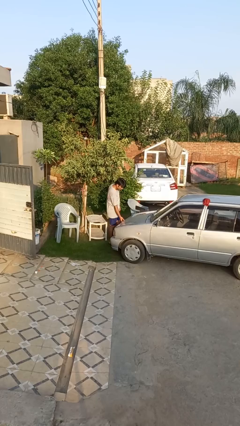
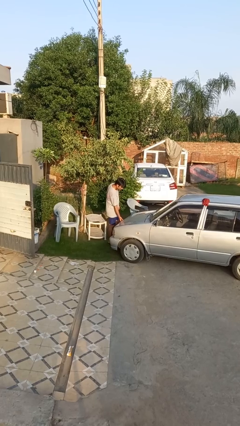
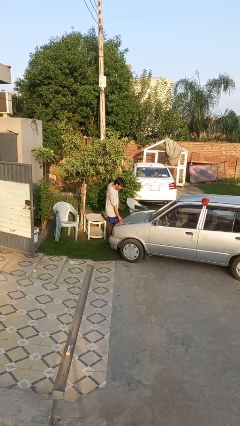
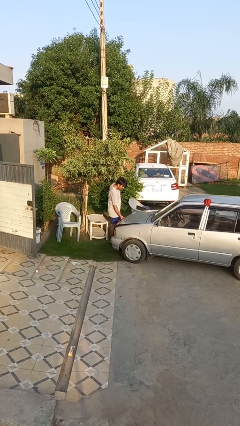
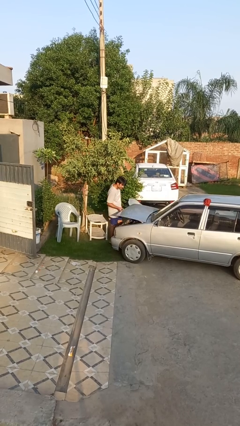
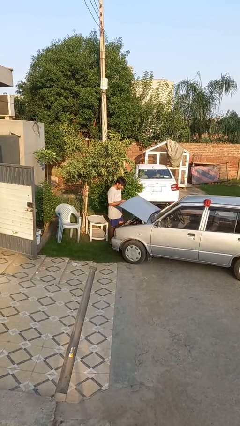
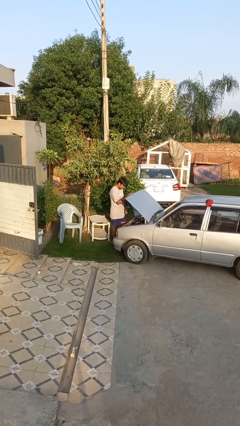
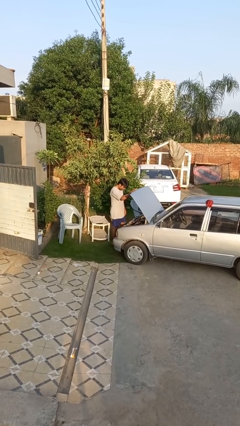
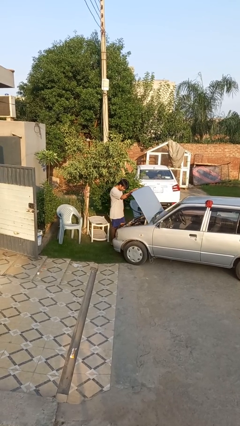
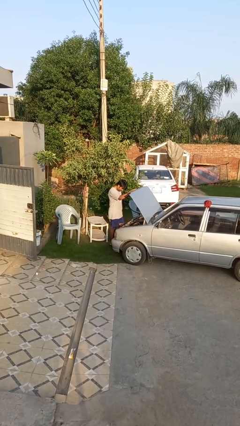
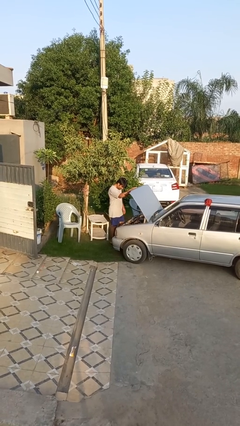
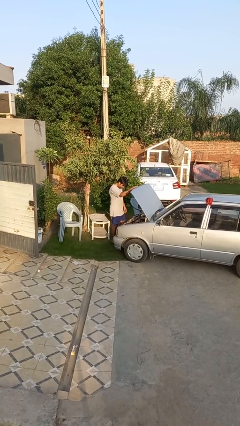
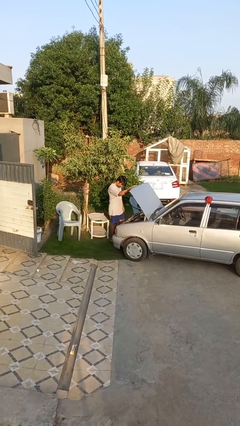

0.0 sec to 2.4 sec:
person opens car hood

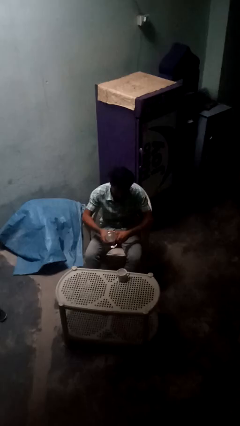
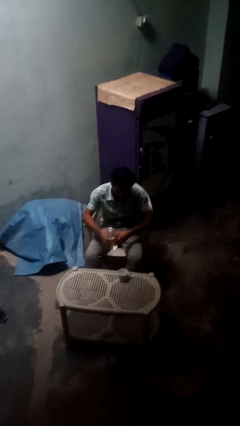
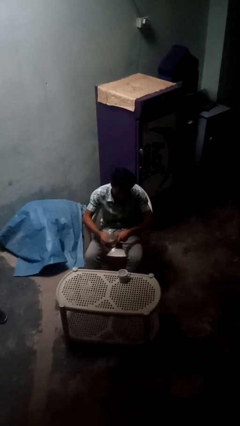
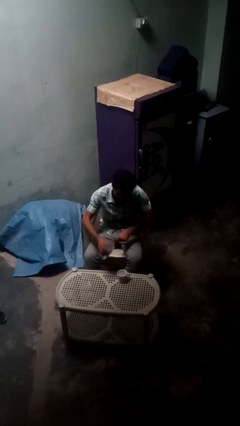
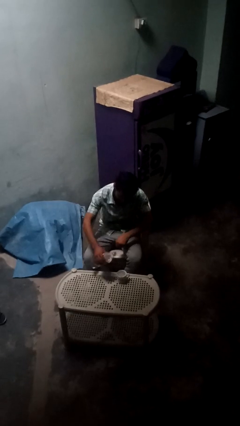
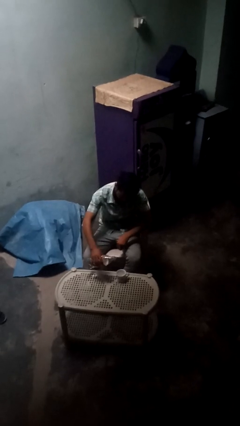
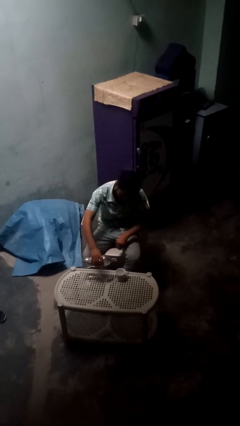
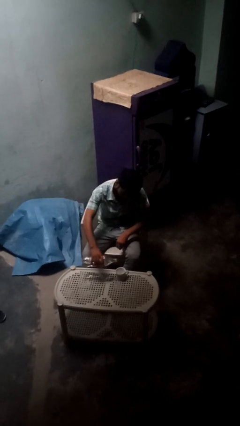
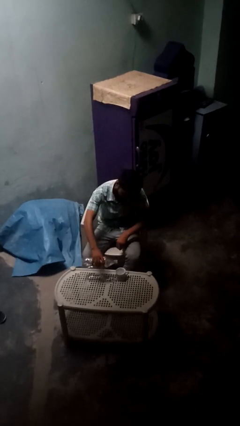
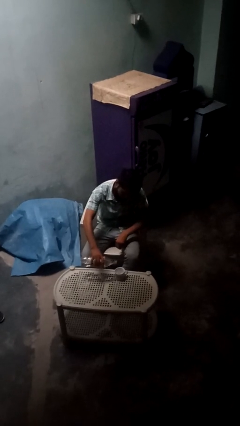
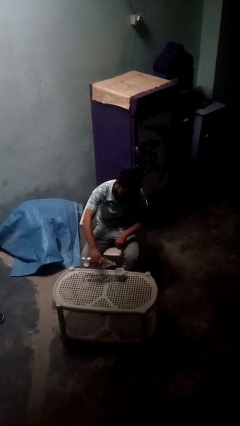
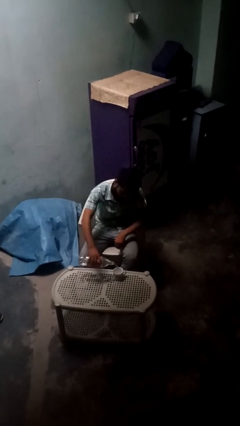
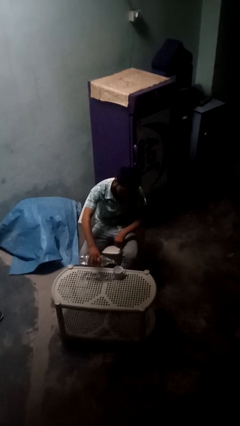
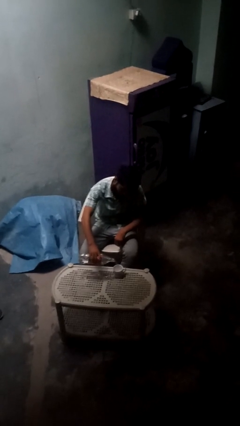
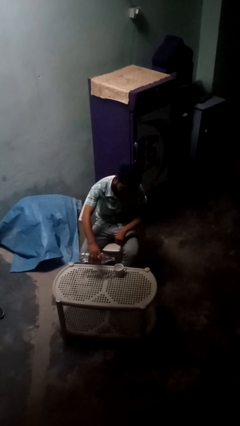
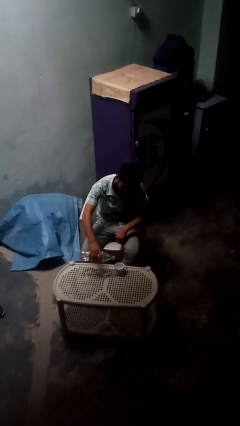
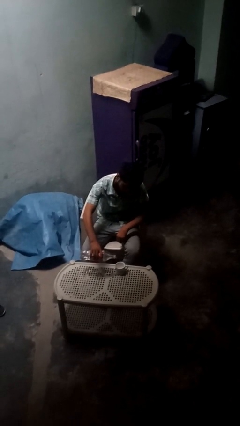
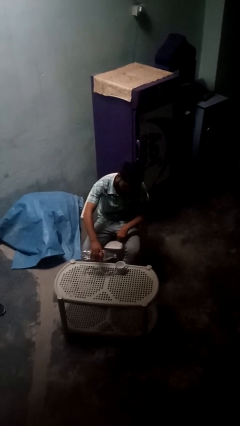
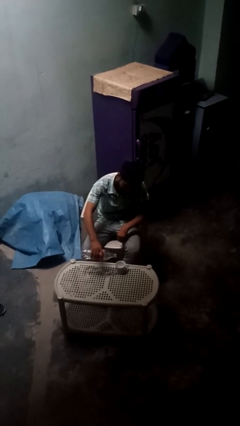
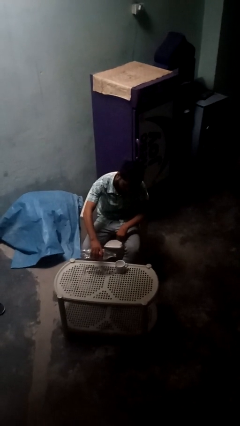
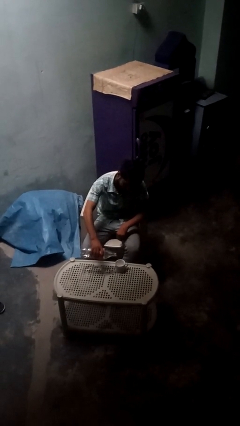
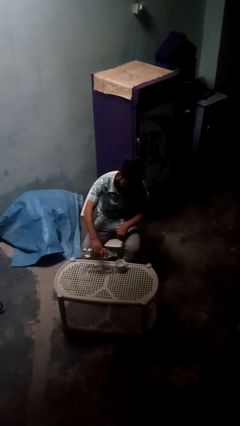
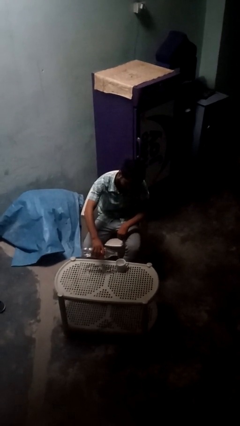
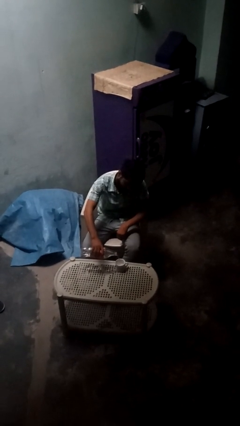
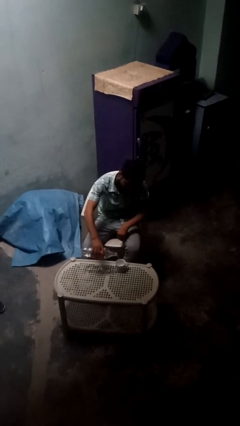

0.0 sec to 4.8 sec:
person pours liquid into cup

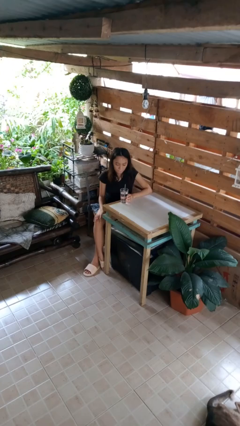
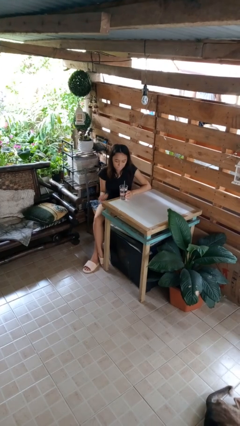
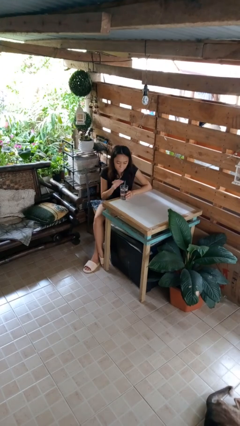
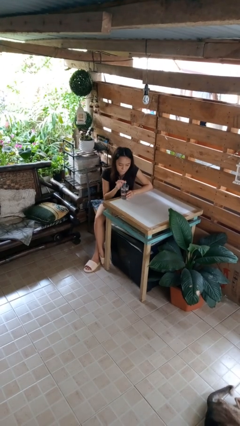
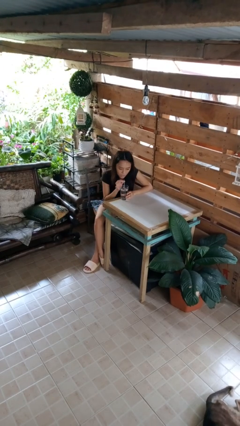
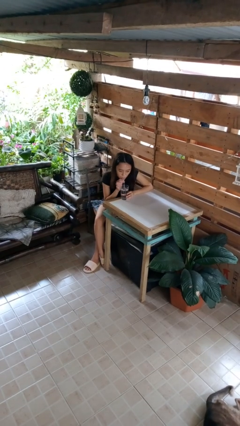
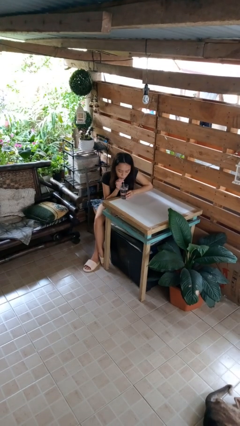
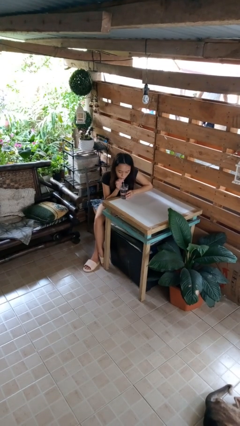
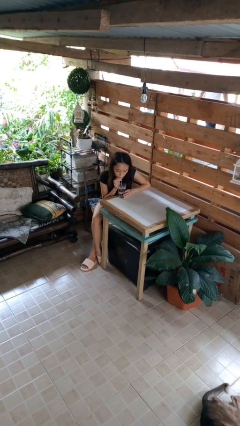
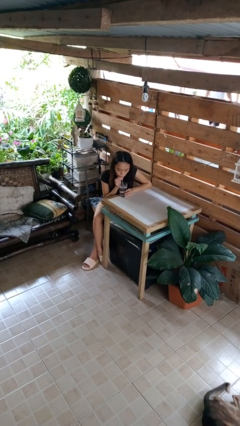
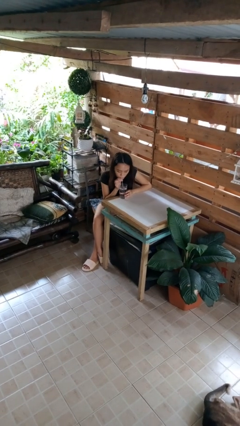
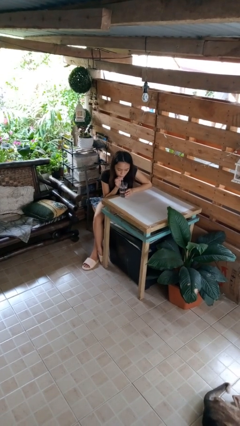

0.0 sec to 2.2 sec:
person drinks from straw

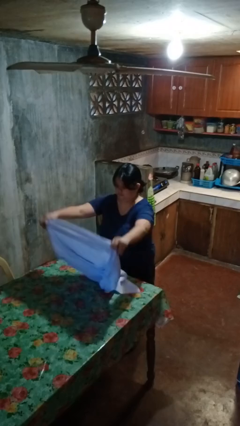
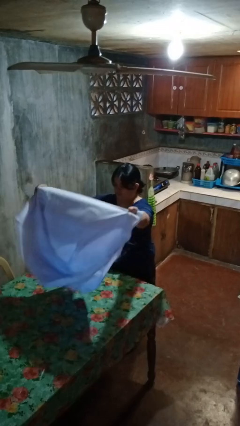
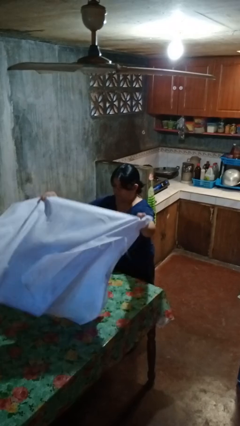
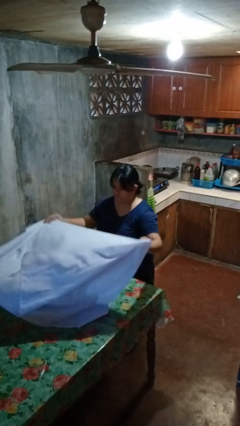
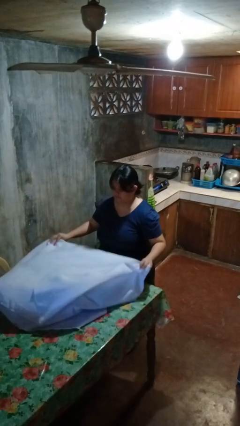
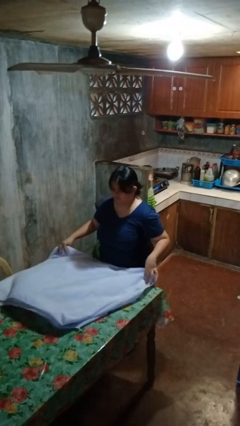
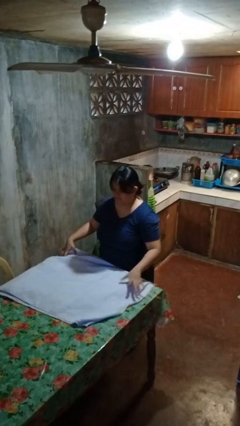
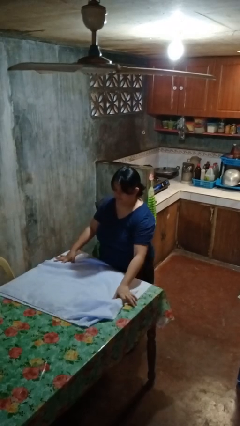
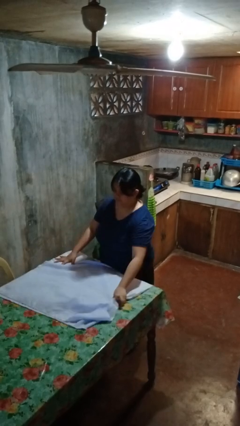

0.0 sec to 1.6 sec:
person spreads tablecloth

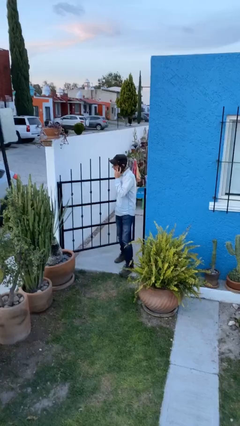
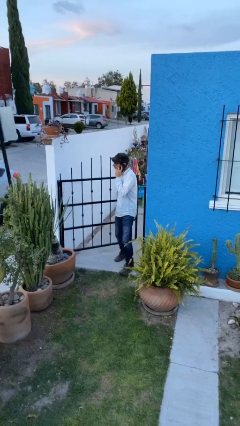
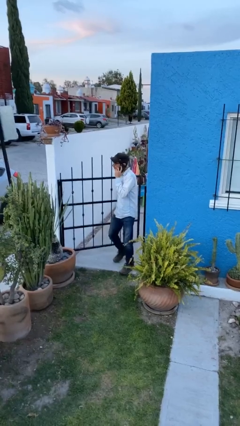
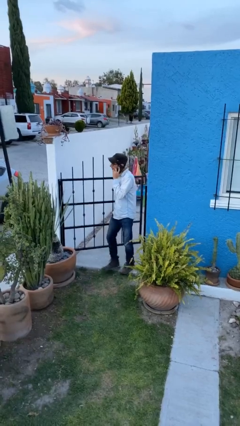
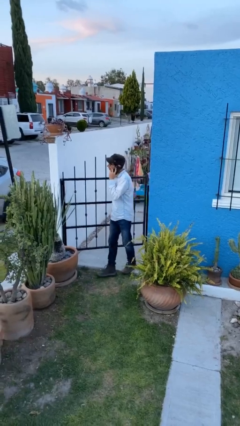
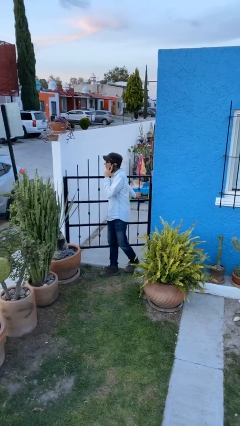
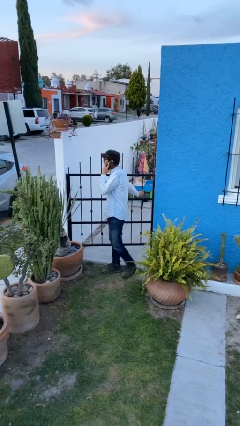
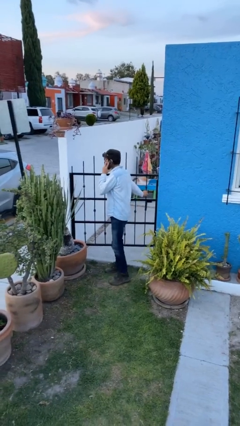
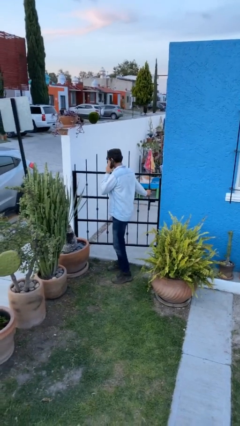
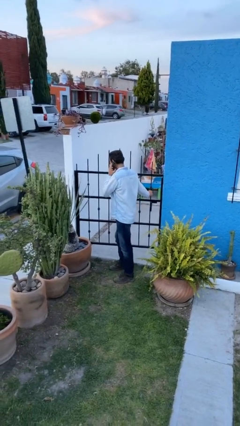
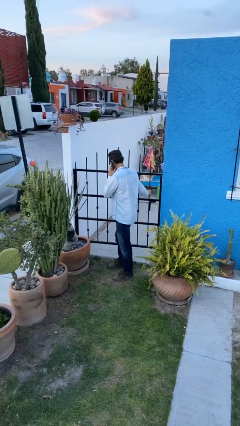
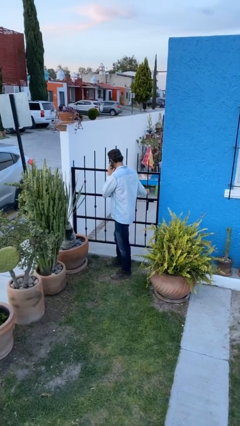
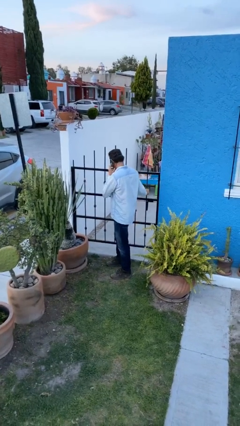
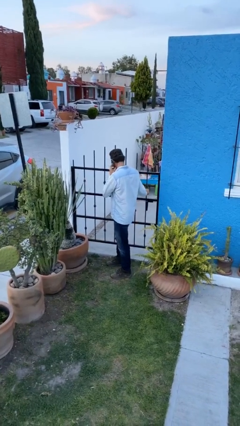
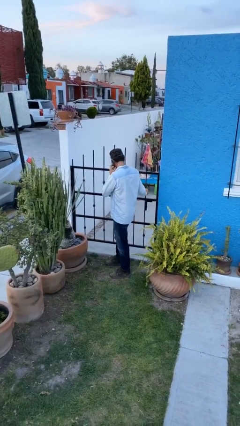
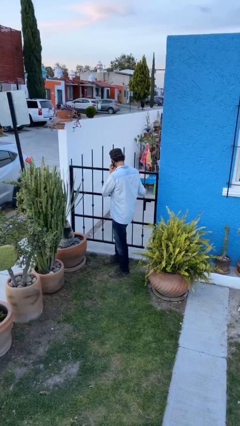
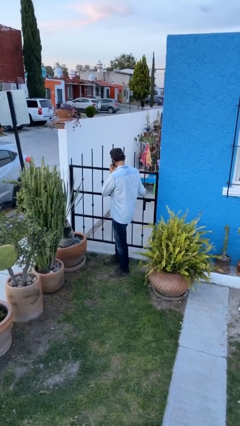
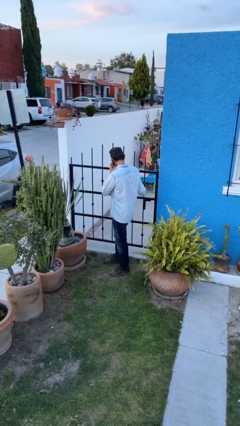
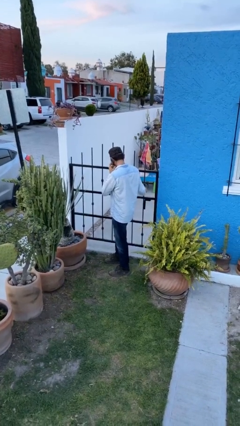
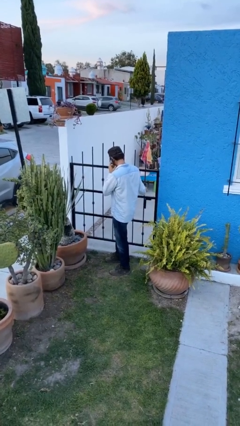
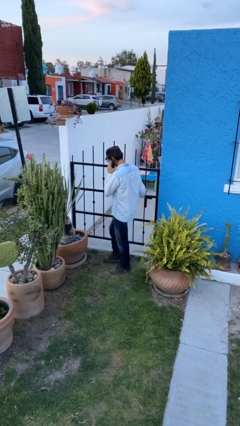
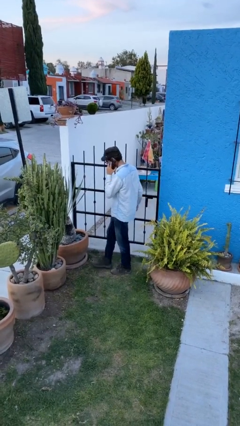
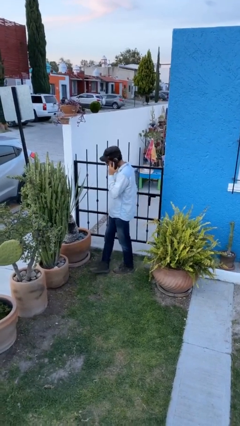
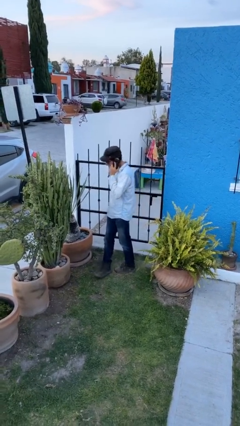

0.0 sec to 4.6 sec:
person closes facility door

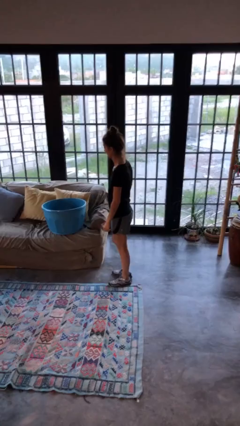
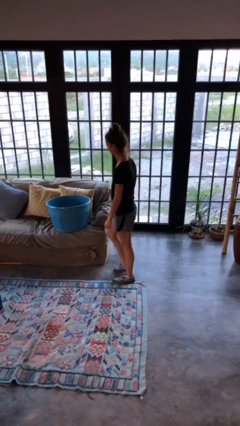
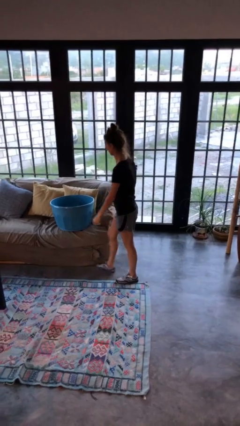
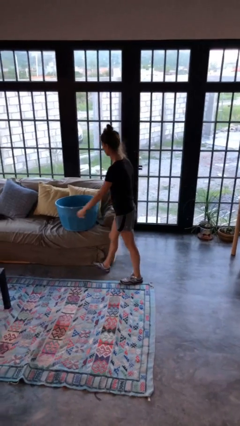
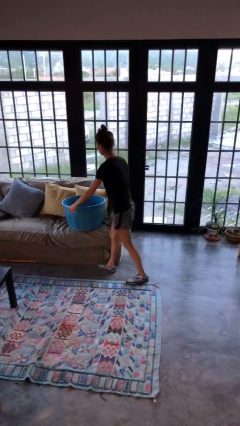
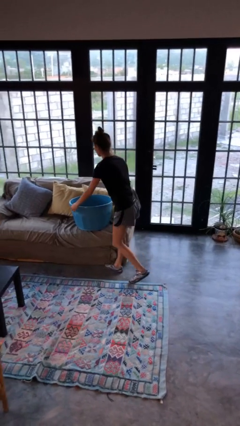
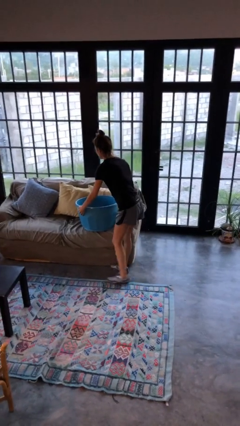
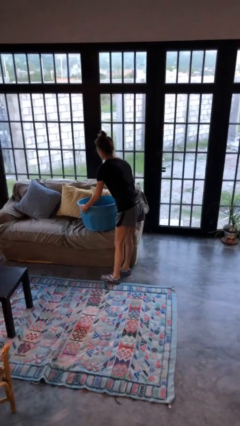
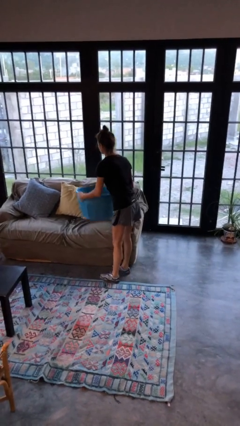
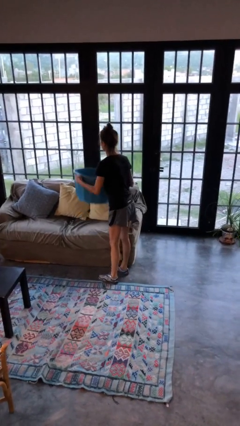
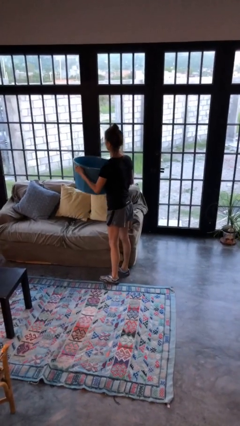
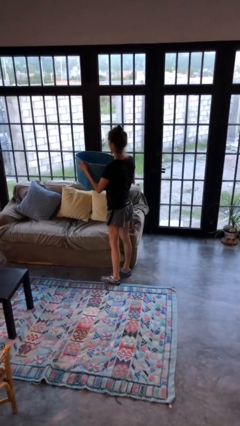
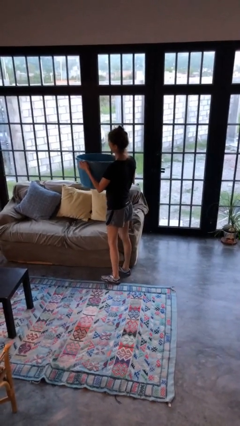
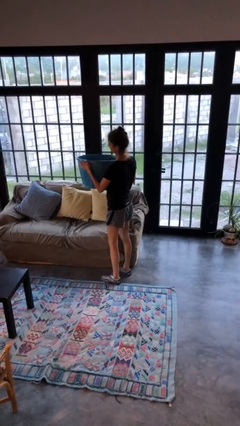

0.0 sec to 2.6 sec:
person picks up object from couch
